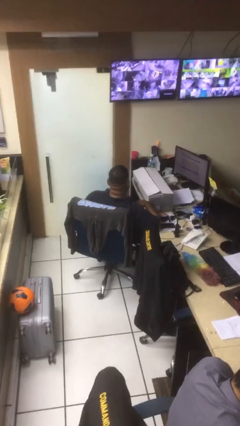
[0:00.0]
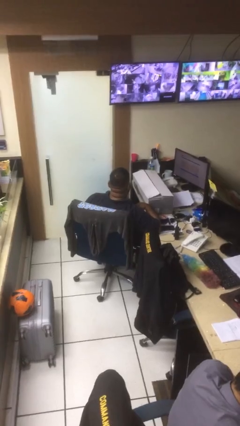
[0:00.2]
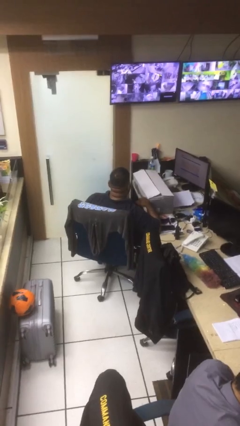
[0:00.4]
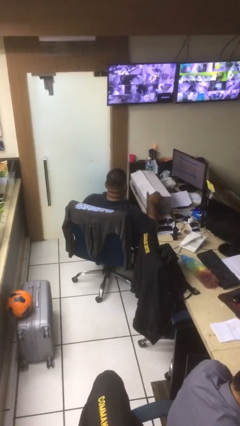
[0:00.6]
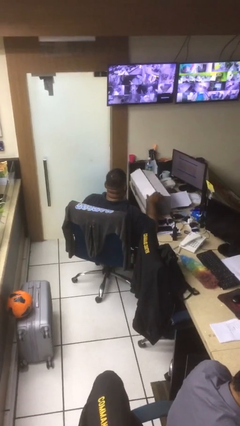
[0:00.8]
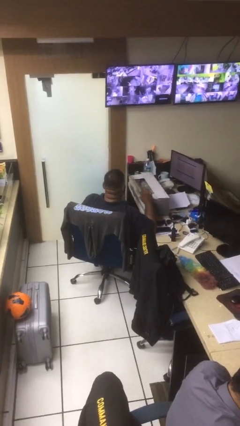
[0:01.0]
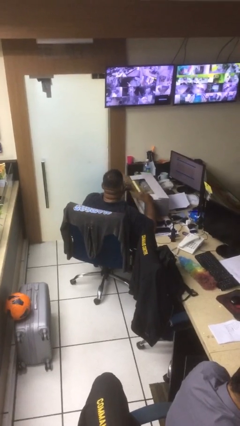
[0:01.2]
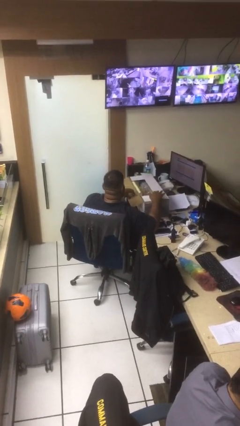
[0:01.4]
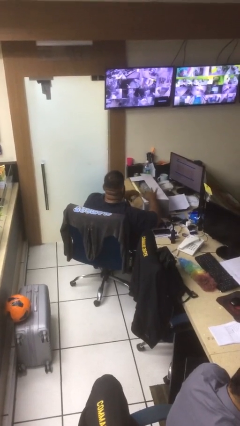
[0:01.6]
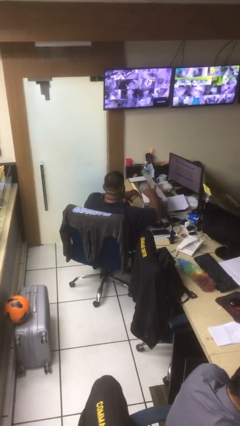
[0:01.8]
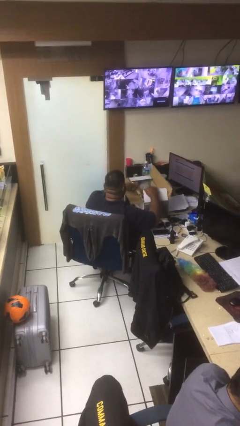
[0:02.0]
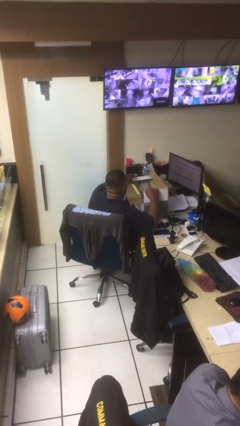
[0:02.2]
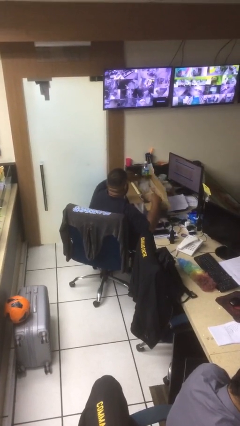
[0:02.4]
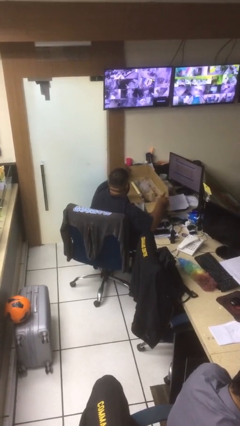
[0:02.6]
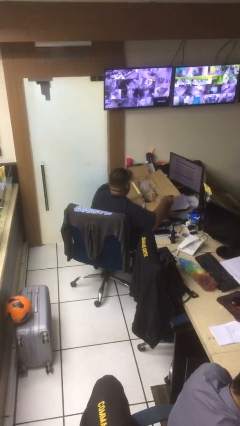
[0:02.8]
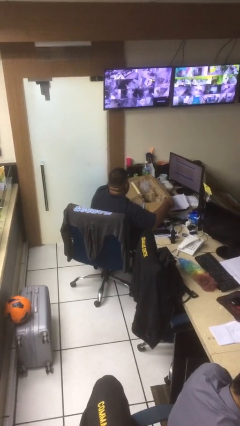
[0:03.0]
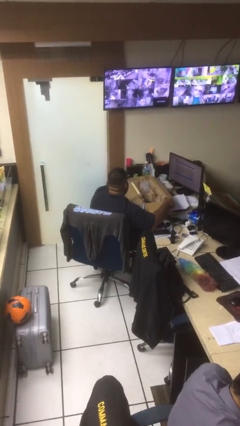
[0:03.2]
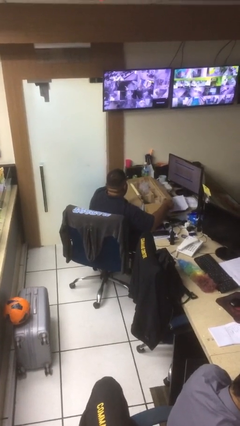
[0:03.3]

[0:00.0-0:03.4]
person opens box

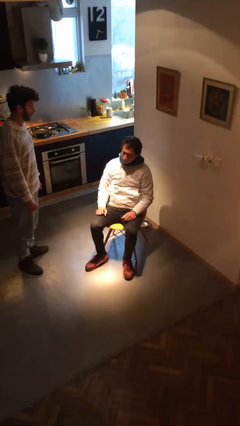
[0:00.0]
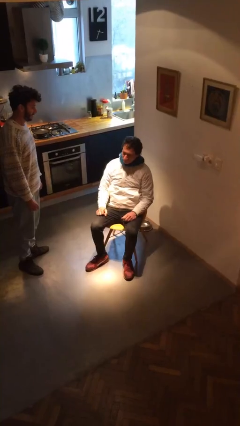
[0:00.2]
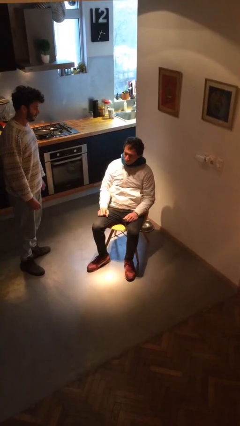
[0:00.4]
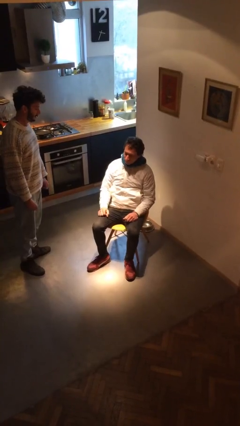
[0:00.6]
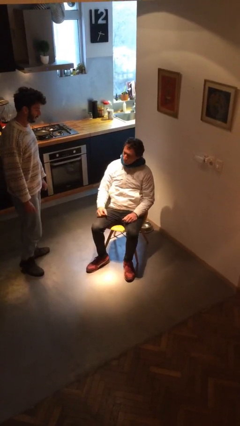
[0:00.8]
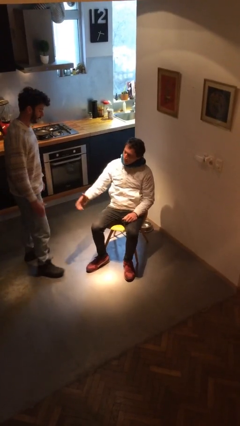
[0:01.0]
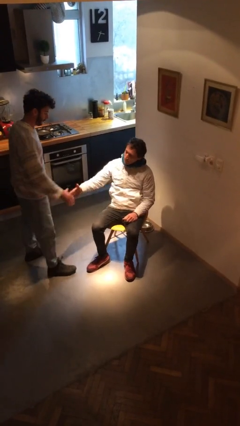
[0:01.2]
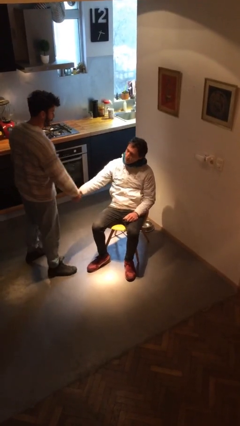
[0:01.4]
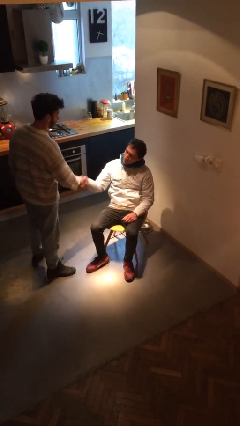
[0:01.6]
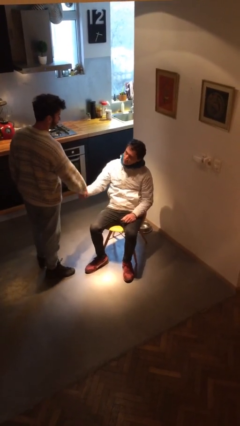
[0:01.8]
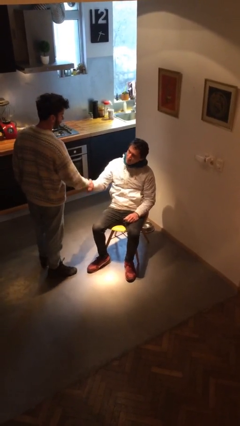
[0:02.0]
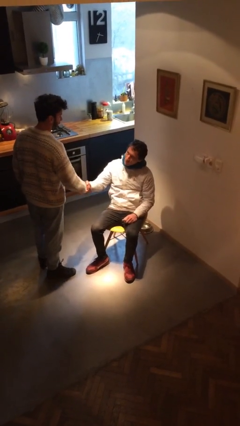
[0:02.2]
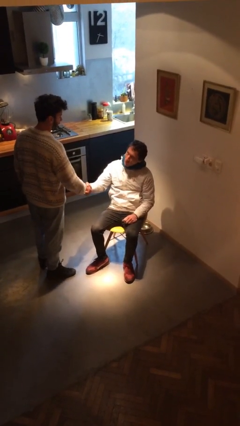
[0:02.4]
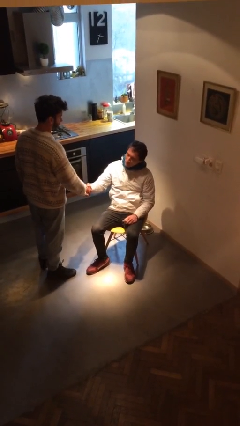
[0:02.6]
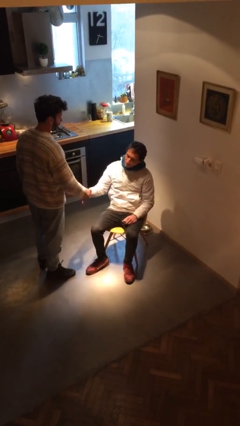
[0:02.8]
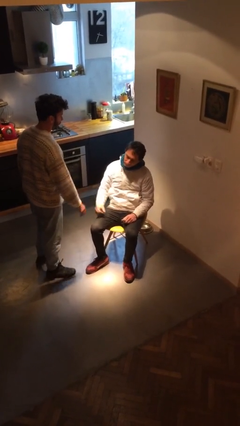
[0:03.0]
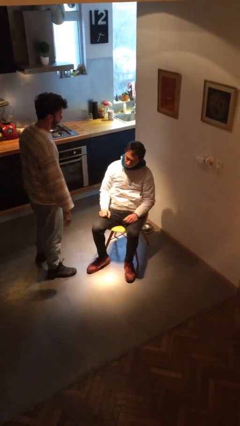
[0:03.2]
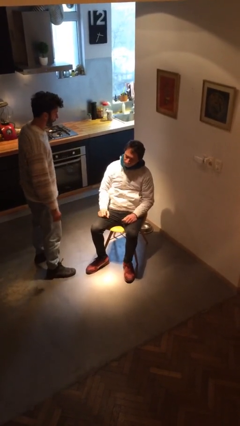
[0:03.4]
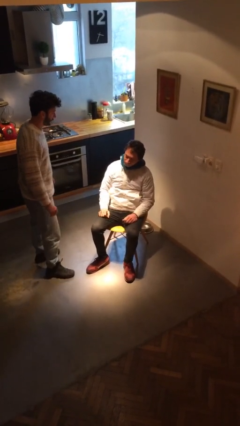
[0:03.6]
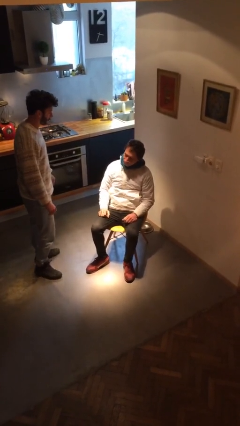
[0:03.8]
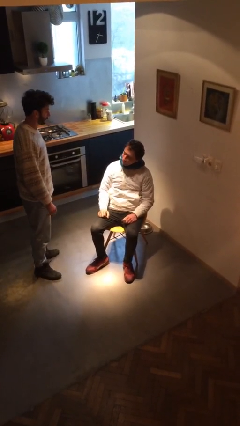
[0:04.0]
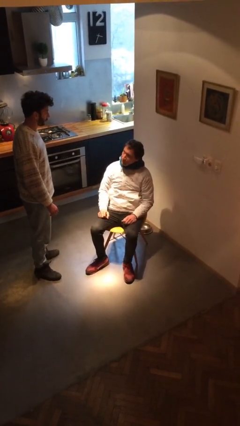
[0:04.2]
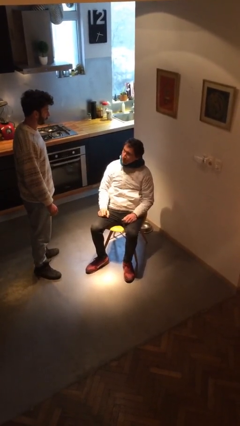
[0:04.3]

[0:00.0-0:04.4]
person shakes hand

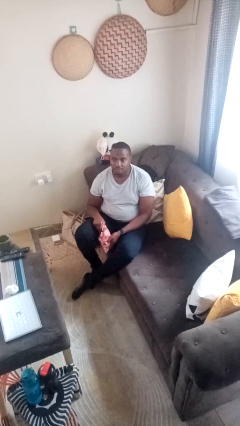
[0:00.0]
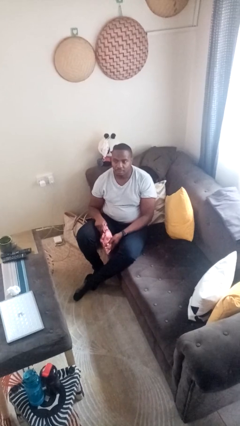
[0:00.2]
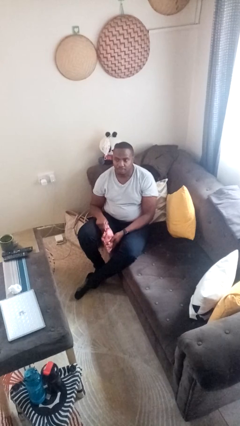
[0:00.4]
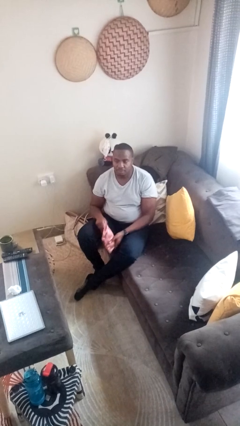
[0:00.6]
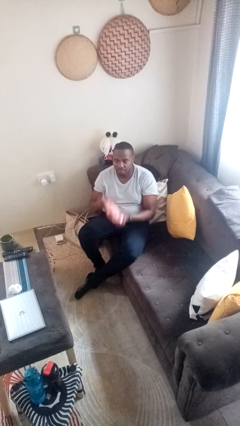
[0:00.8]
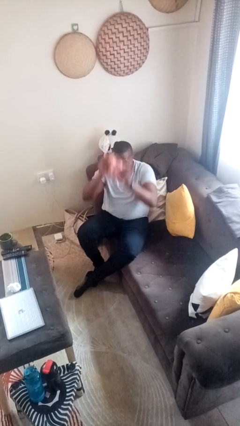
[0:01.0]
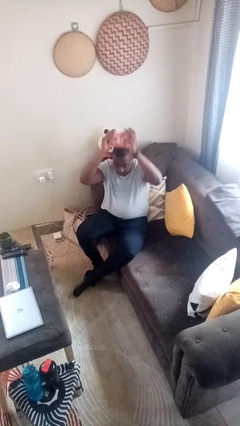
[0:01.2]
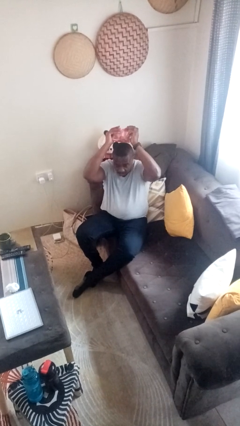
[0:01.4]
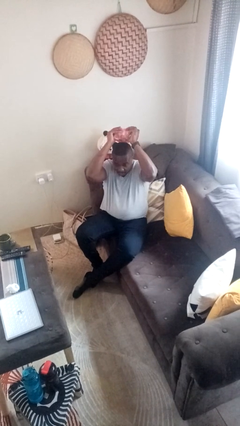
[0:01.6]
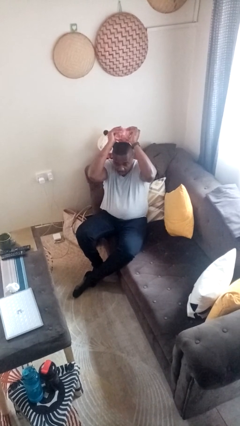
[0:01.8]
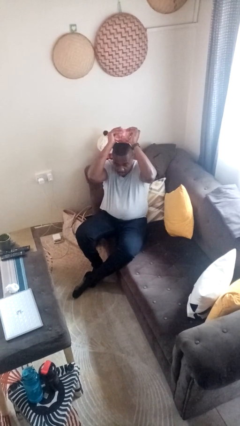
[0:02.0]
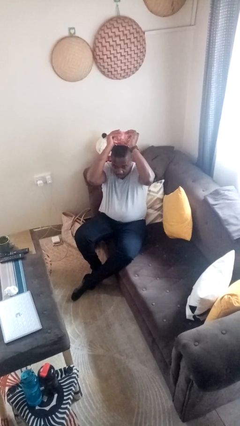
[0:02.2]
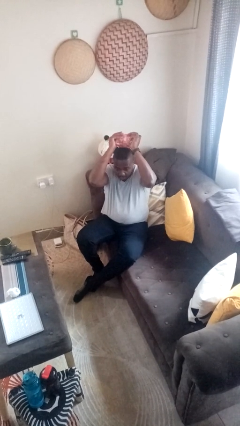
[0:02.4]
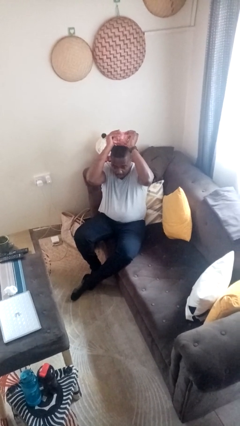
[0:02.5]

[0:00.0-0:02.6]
person holds object above head

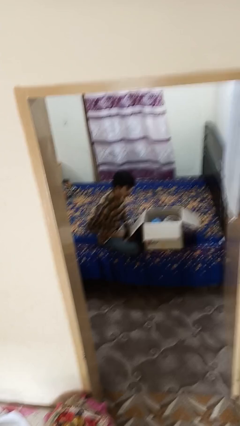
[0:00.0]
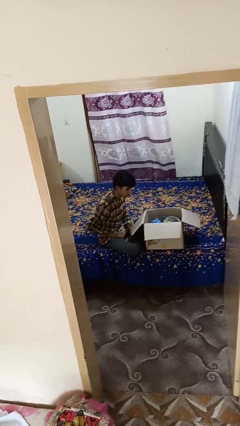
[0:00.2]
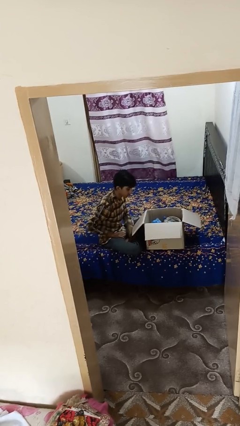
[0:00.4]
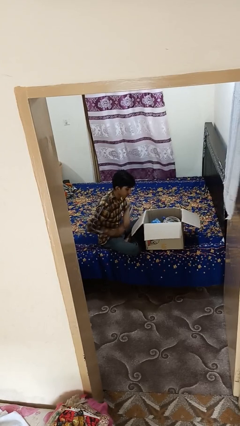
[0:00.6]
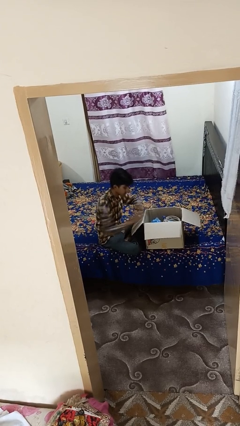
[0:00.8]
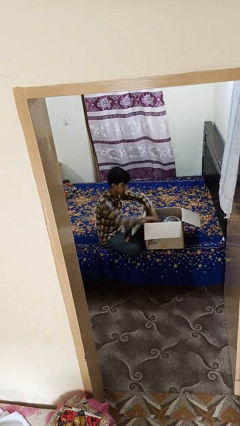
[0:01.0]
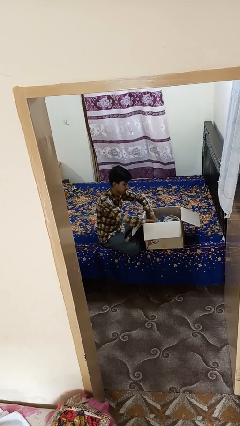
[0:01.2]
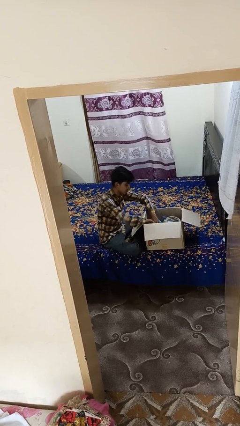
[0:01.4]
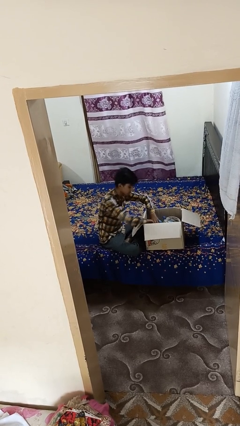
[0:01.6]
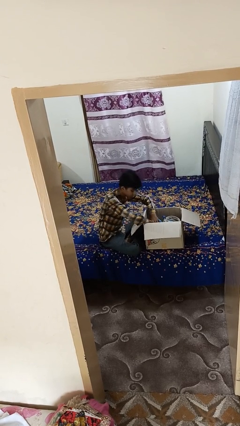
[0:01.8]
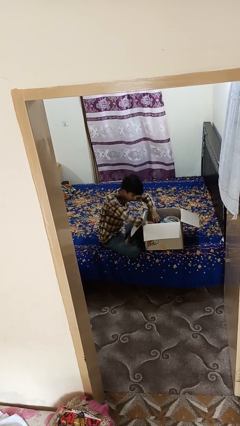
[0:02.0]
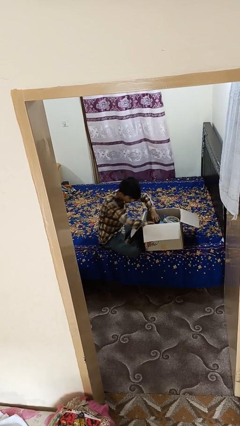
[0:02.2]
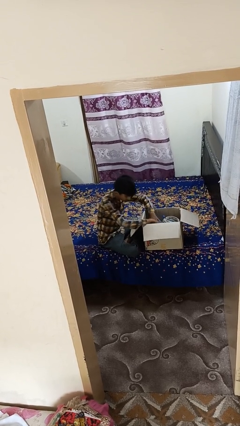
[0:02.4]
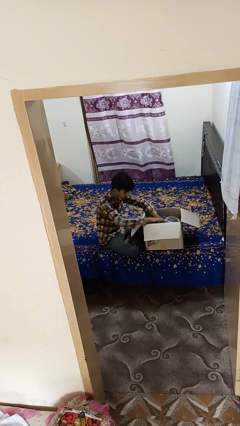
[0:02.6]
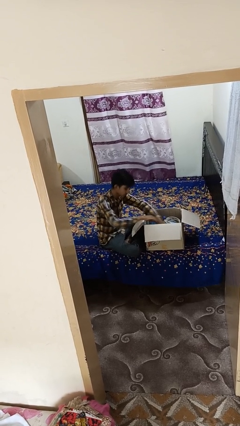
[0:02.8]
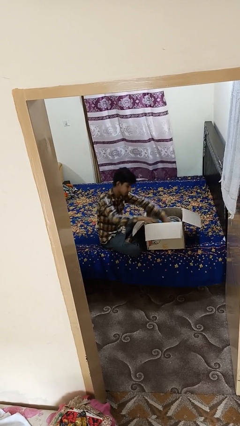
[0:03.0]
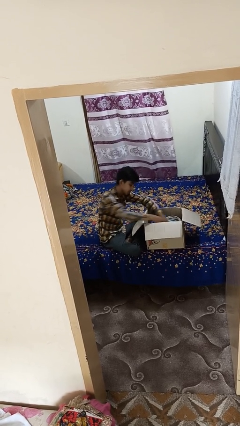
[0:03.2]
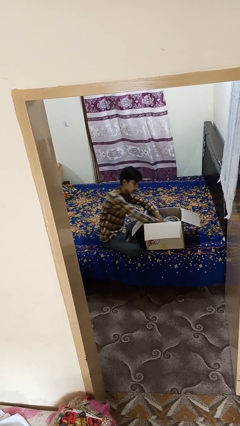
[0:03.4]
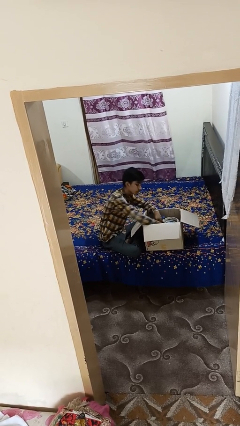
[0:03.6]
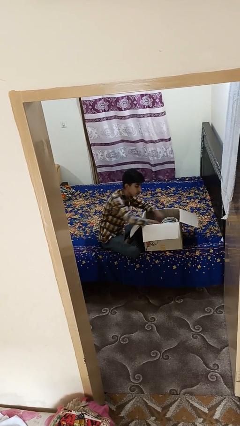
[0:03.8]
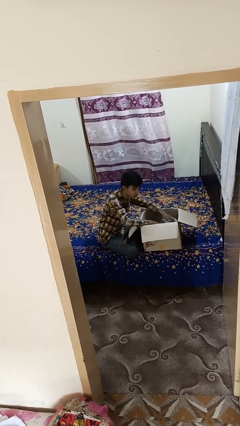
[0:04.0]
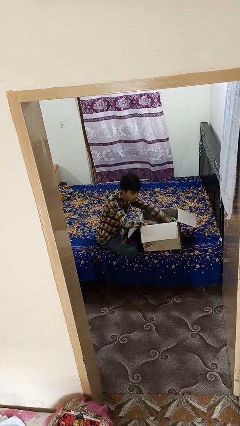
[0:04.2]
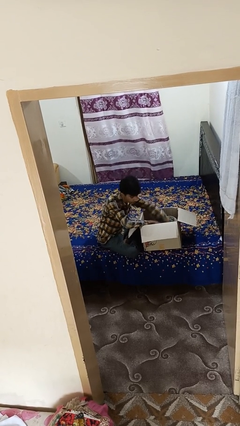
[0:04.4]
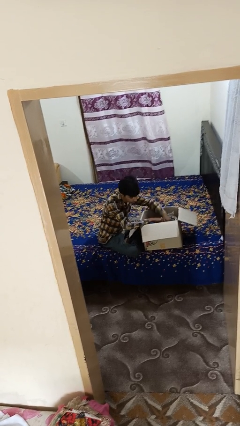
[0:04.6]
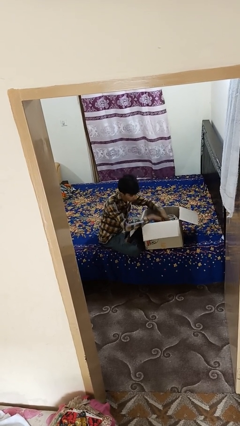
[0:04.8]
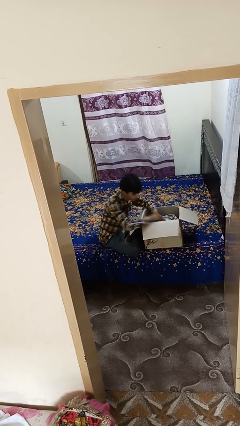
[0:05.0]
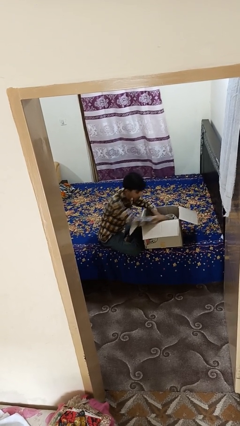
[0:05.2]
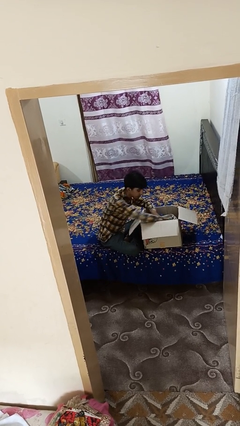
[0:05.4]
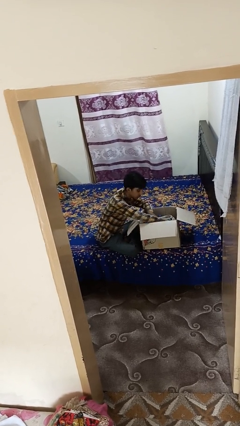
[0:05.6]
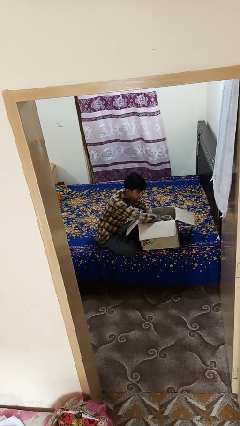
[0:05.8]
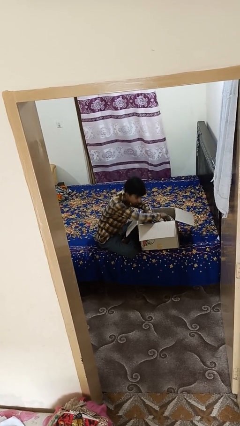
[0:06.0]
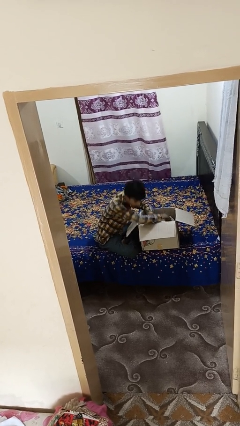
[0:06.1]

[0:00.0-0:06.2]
person searches in box

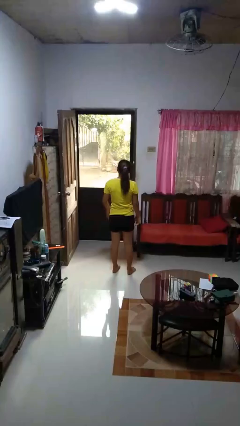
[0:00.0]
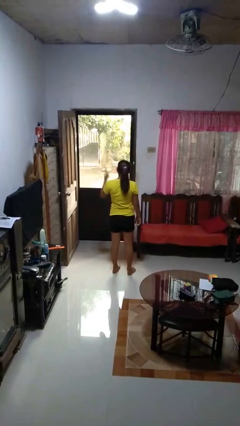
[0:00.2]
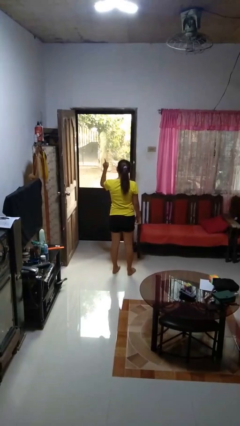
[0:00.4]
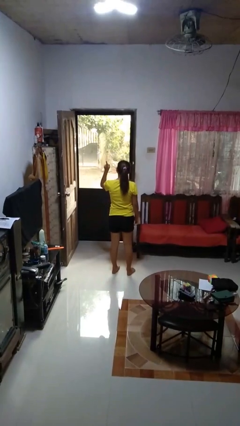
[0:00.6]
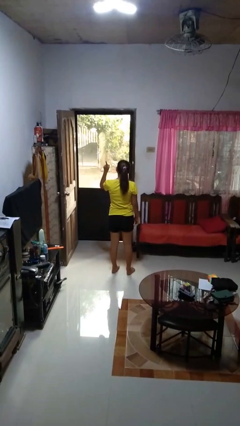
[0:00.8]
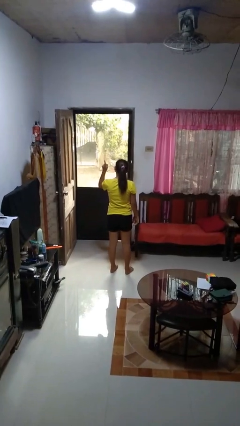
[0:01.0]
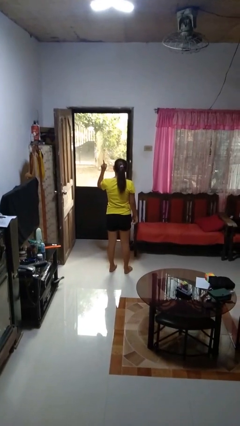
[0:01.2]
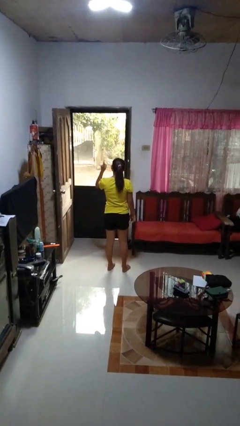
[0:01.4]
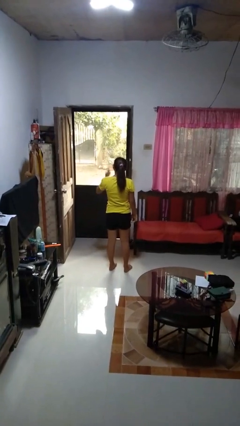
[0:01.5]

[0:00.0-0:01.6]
person gestures number one
